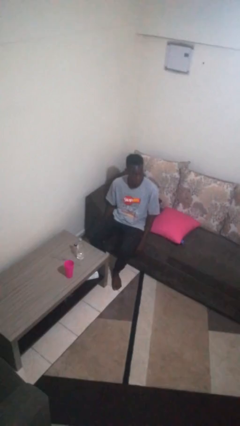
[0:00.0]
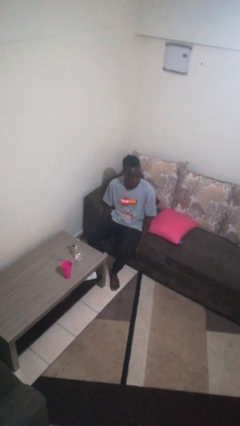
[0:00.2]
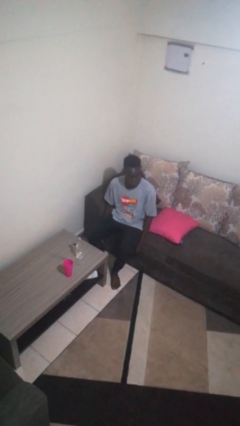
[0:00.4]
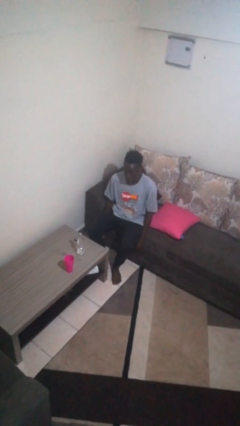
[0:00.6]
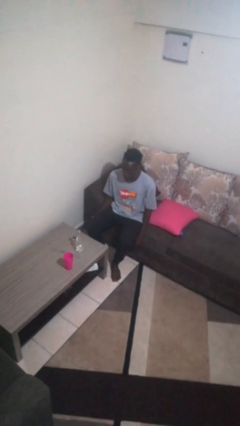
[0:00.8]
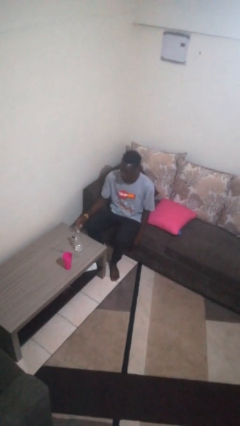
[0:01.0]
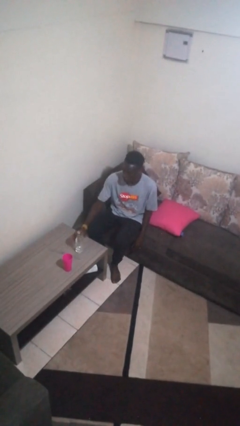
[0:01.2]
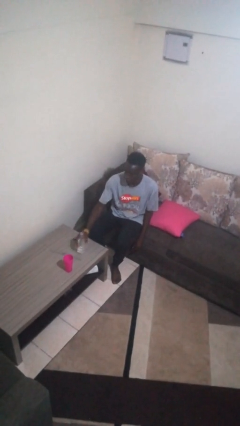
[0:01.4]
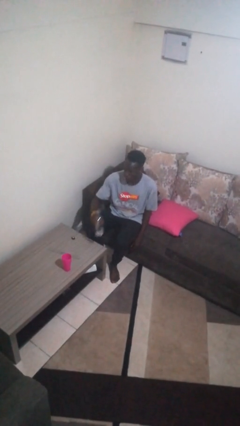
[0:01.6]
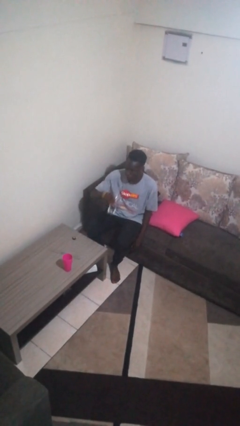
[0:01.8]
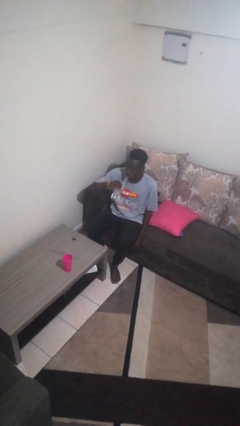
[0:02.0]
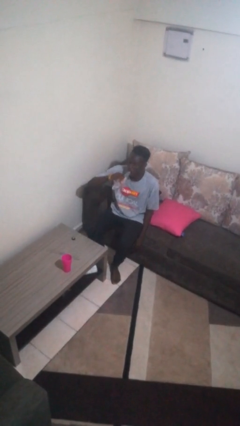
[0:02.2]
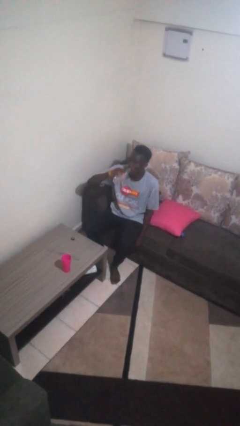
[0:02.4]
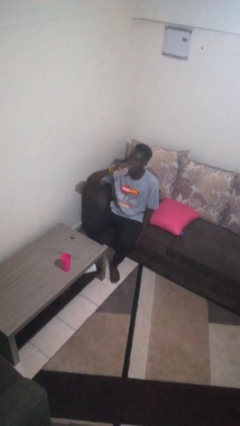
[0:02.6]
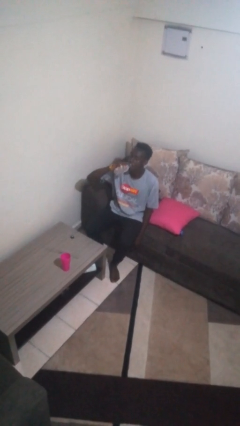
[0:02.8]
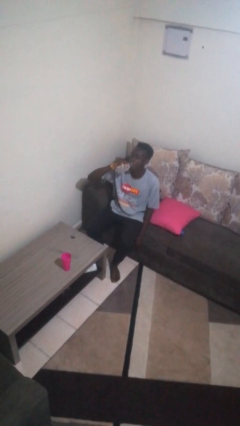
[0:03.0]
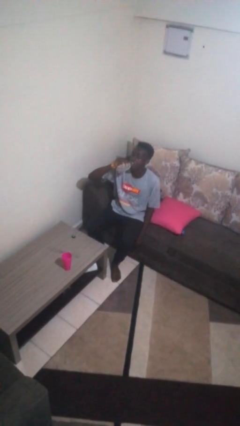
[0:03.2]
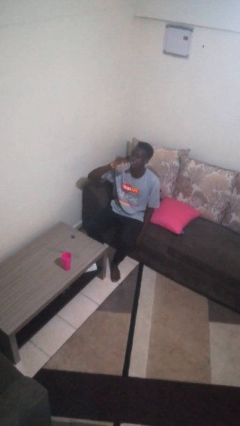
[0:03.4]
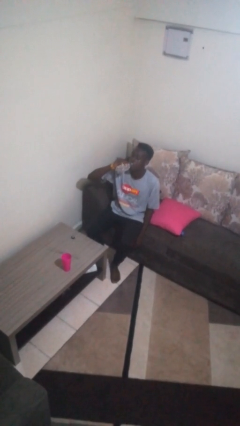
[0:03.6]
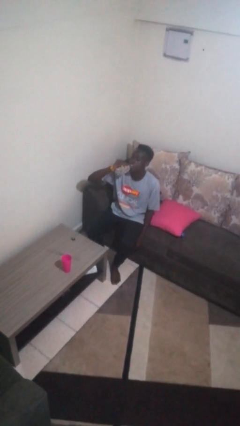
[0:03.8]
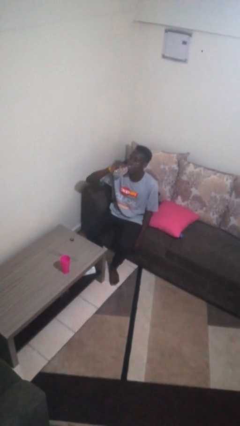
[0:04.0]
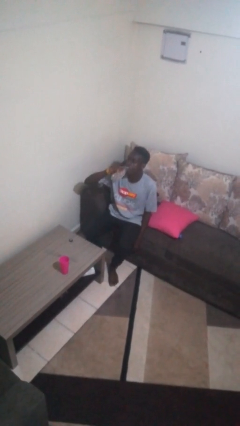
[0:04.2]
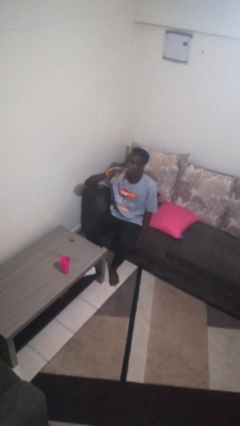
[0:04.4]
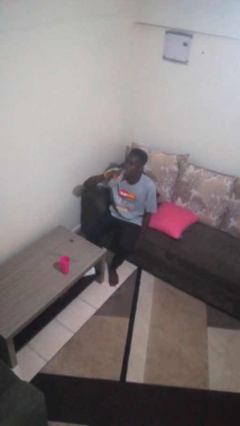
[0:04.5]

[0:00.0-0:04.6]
person drinks from bottle

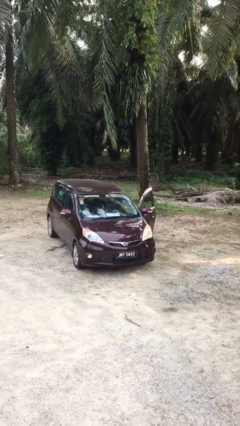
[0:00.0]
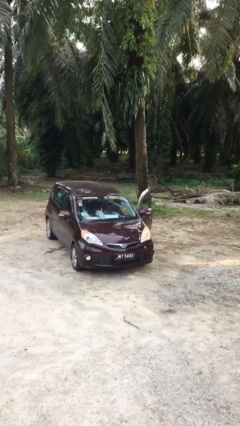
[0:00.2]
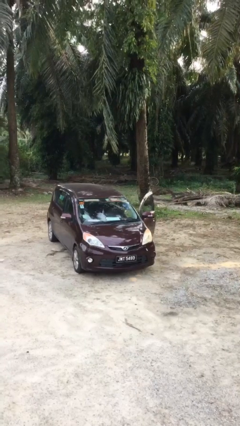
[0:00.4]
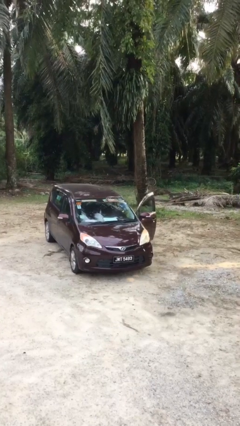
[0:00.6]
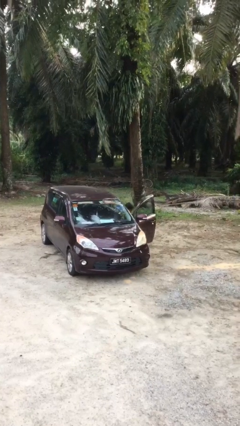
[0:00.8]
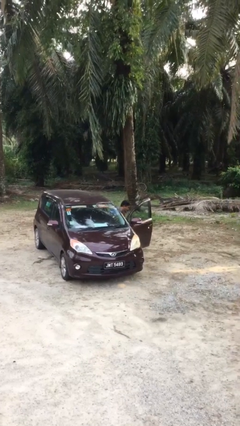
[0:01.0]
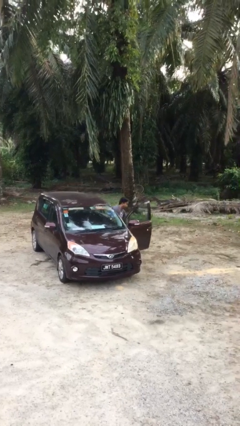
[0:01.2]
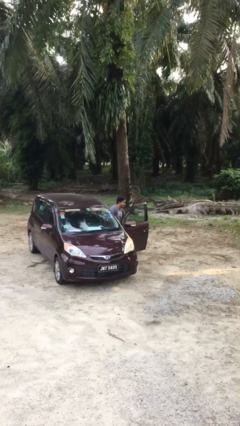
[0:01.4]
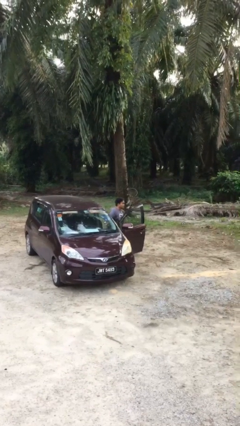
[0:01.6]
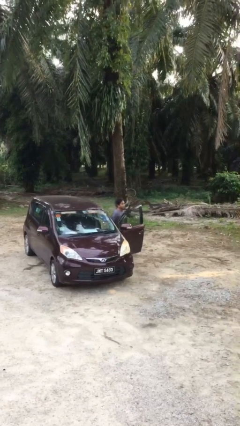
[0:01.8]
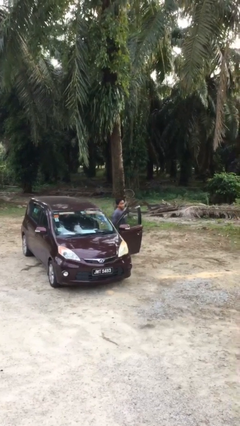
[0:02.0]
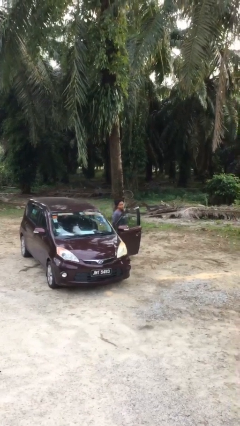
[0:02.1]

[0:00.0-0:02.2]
person exits car

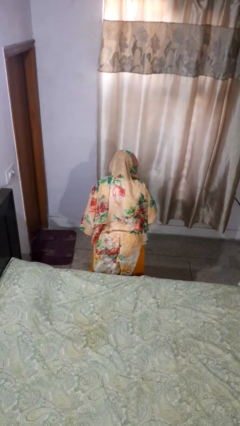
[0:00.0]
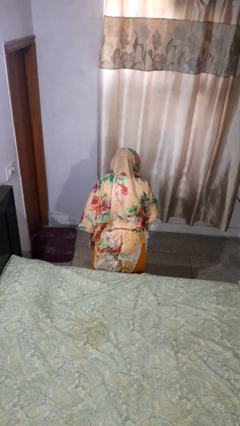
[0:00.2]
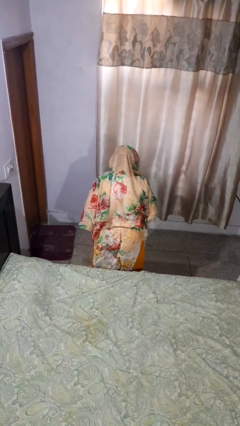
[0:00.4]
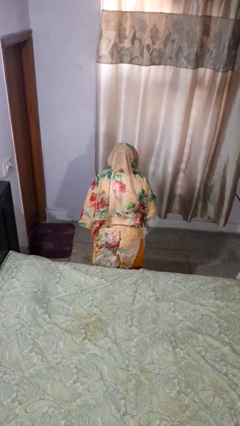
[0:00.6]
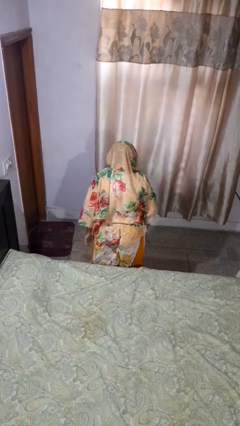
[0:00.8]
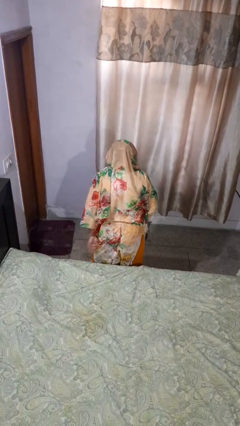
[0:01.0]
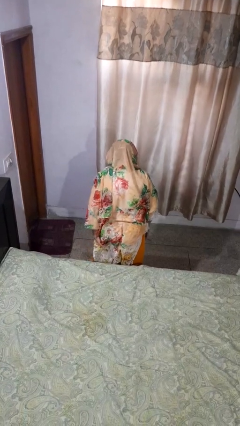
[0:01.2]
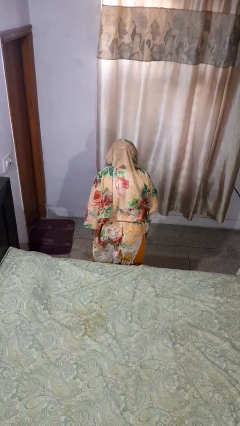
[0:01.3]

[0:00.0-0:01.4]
person picks up object from floor

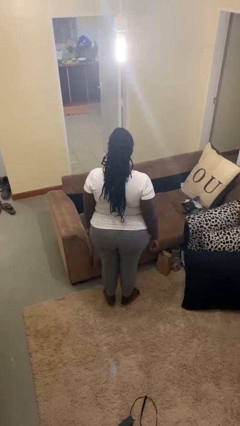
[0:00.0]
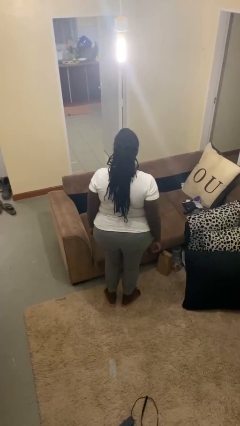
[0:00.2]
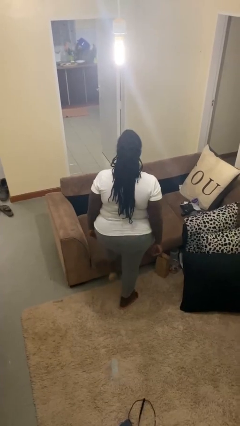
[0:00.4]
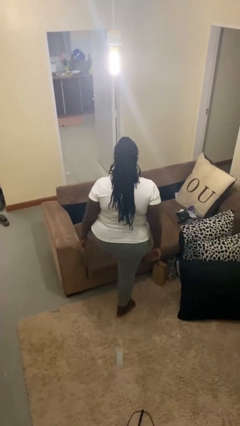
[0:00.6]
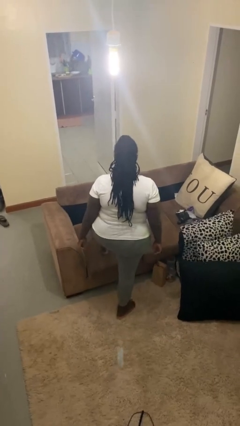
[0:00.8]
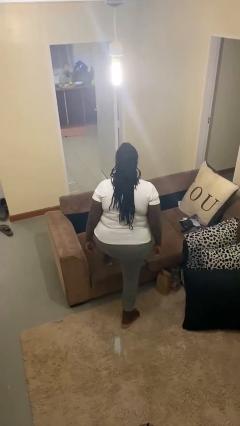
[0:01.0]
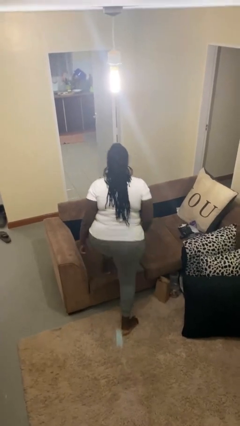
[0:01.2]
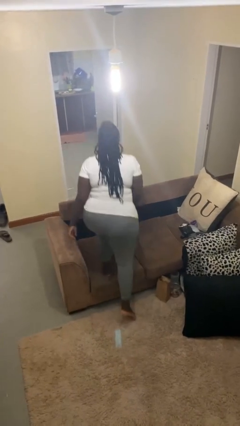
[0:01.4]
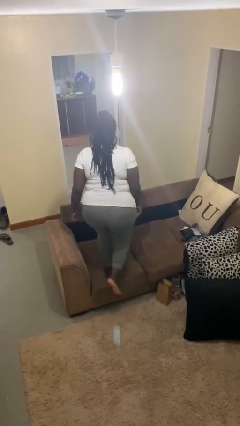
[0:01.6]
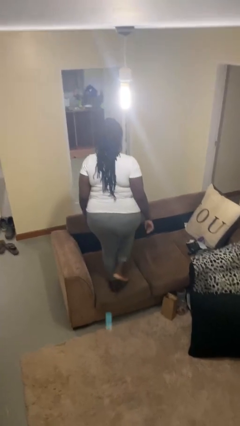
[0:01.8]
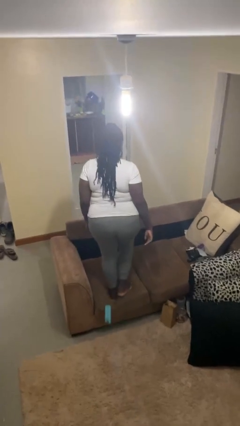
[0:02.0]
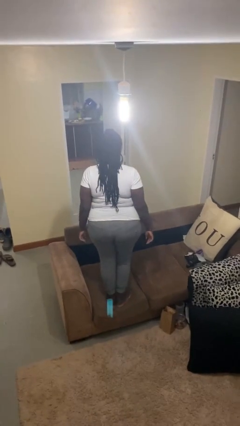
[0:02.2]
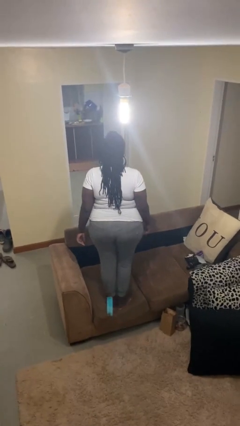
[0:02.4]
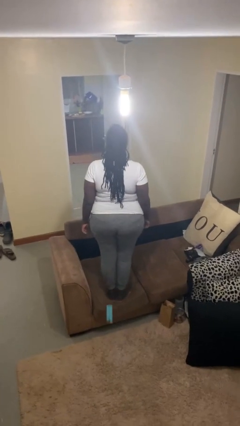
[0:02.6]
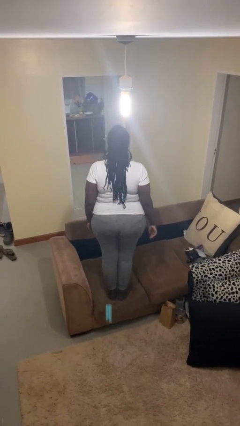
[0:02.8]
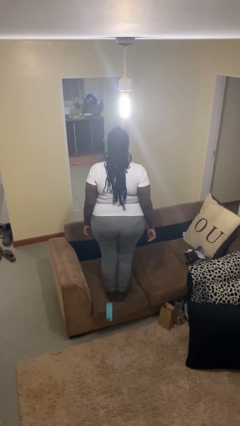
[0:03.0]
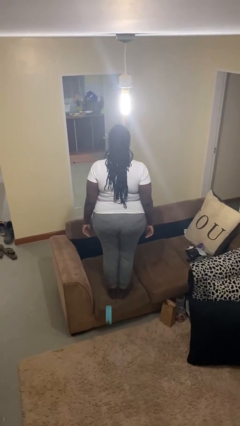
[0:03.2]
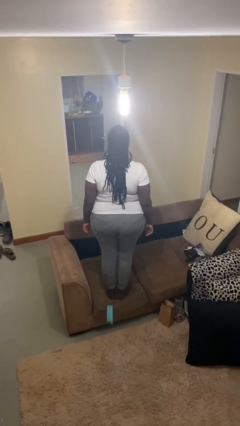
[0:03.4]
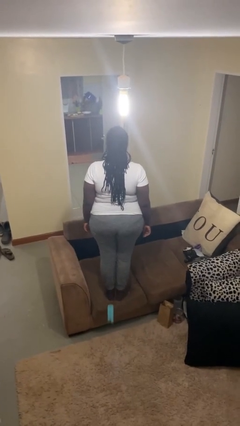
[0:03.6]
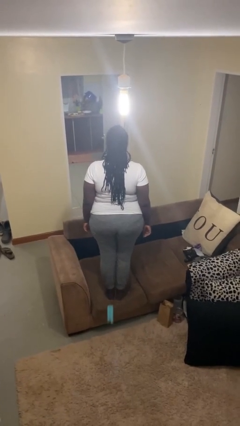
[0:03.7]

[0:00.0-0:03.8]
person climbs on couch

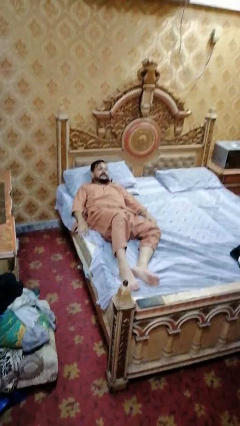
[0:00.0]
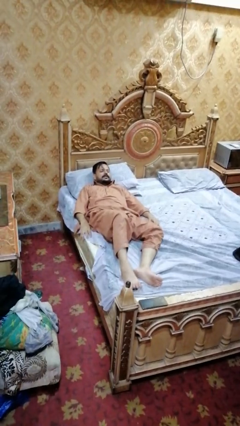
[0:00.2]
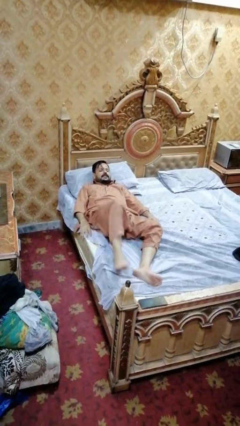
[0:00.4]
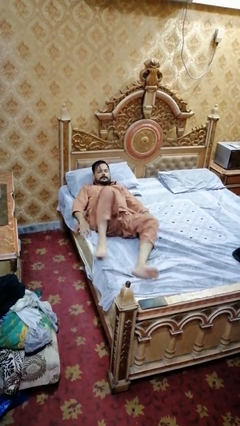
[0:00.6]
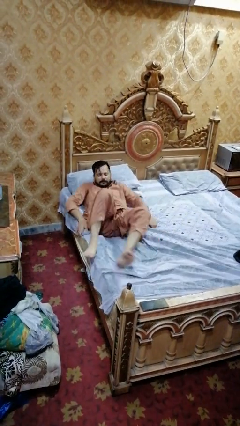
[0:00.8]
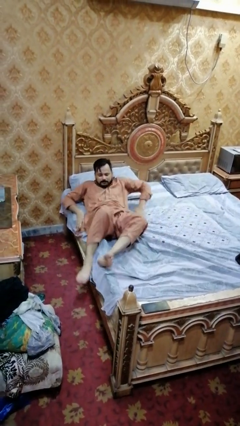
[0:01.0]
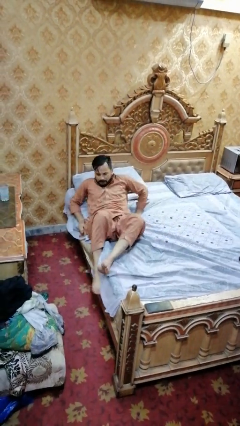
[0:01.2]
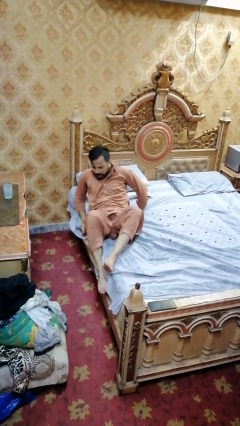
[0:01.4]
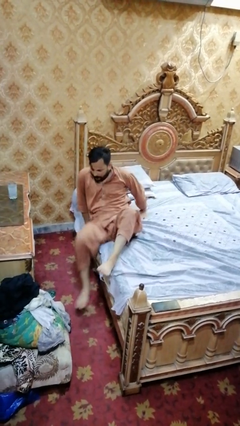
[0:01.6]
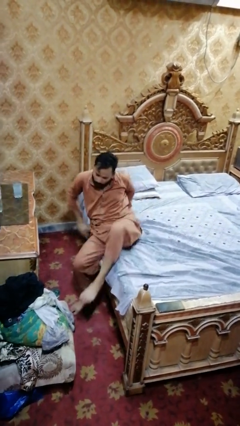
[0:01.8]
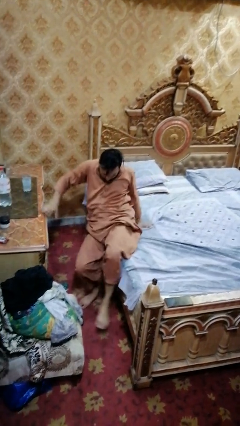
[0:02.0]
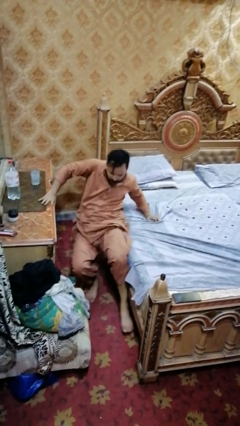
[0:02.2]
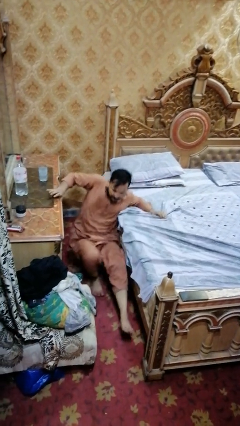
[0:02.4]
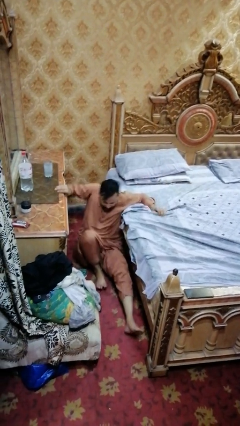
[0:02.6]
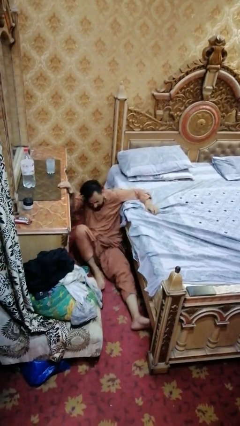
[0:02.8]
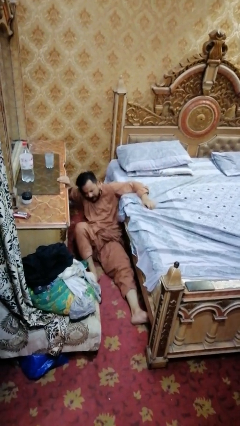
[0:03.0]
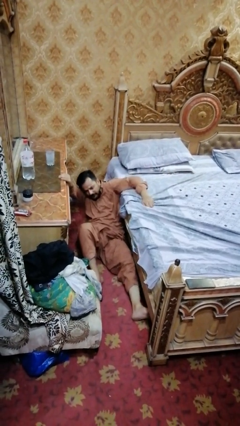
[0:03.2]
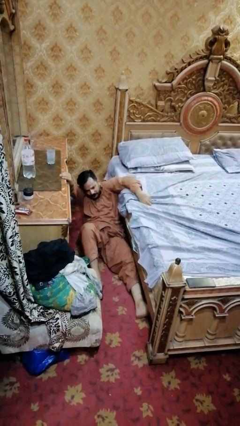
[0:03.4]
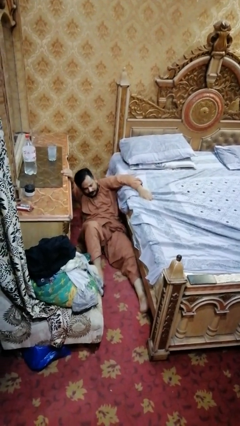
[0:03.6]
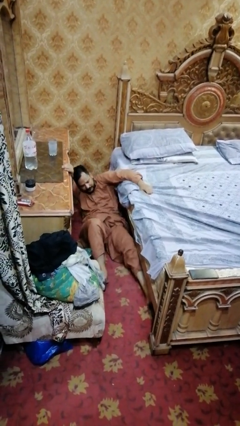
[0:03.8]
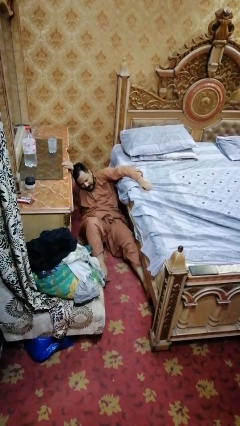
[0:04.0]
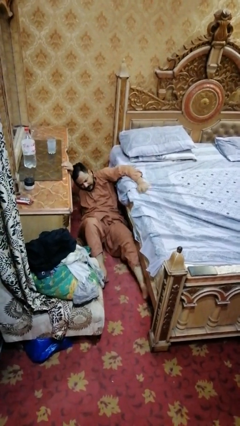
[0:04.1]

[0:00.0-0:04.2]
person falls from bed

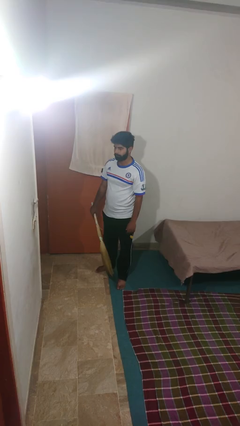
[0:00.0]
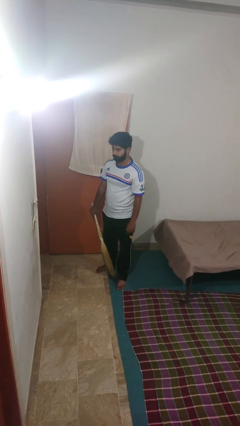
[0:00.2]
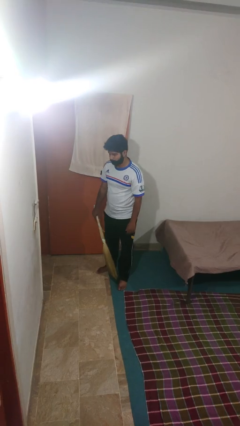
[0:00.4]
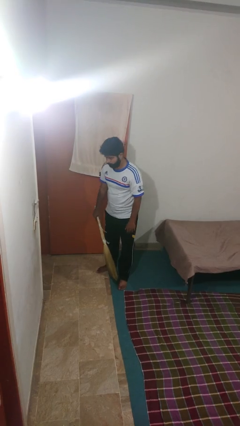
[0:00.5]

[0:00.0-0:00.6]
person sweeps floor

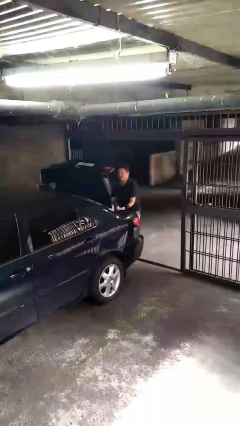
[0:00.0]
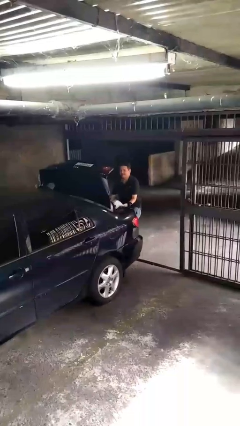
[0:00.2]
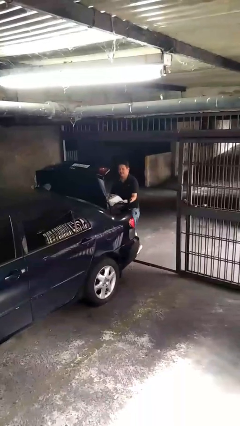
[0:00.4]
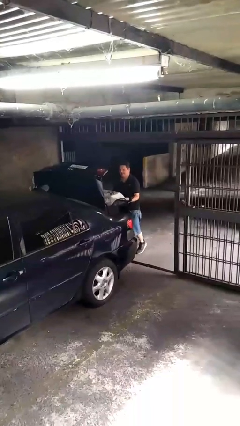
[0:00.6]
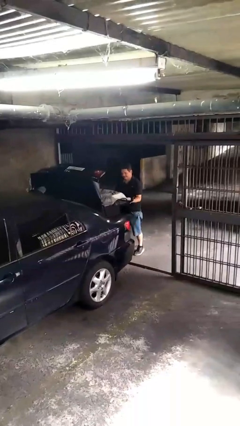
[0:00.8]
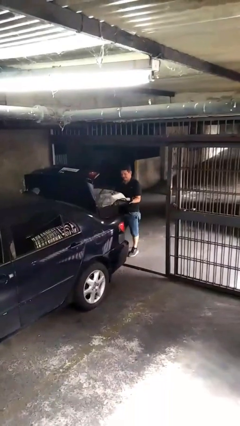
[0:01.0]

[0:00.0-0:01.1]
person unloads car
